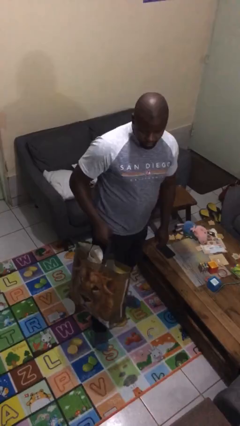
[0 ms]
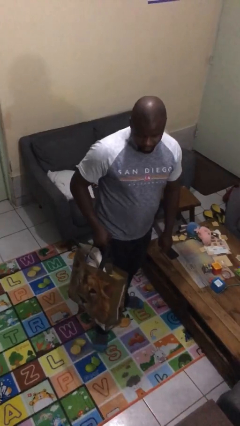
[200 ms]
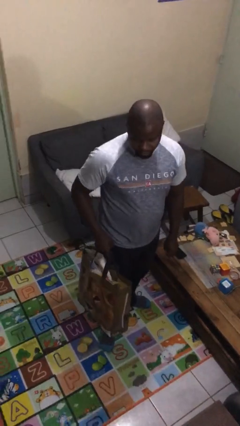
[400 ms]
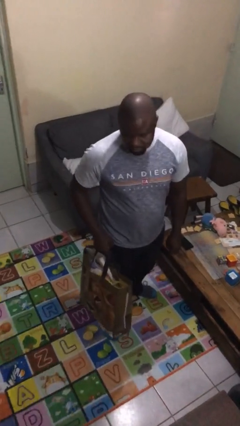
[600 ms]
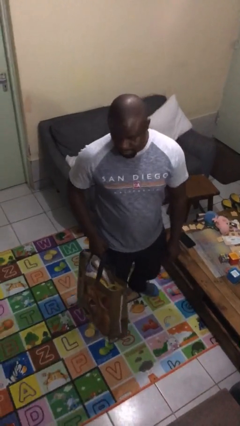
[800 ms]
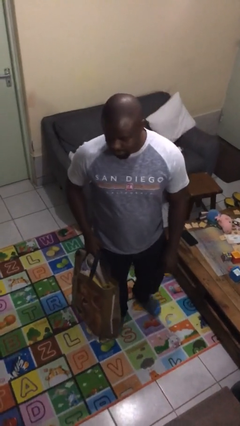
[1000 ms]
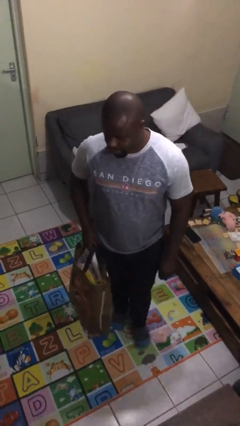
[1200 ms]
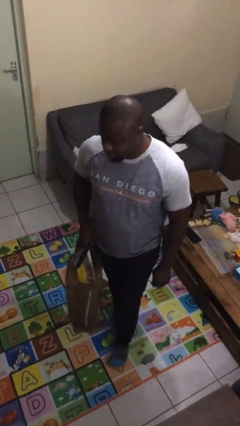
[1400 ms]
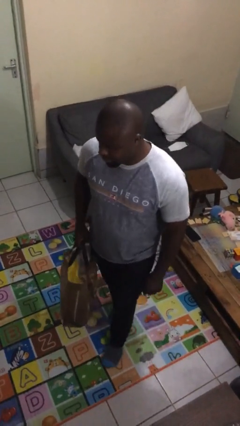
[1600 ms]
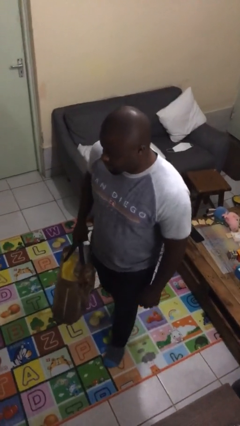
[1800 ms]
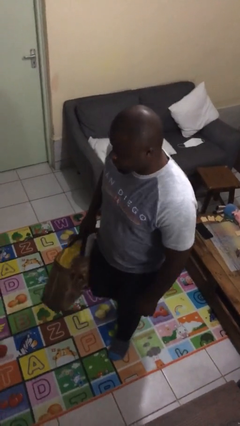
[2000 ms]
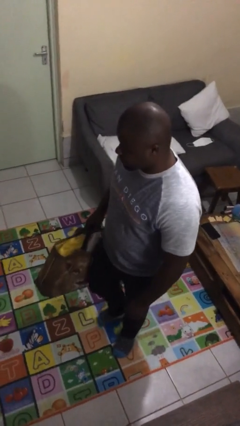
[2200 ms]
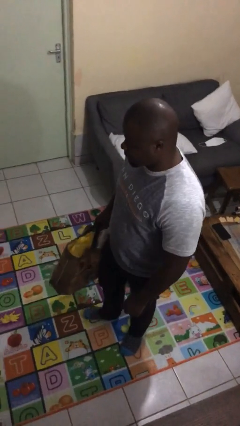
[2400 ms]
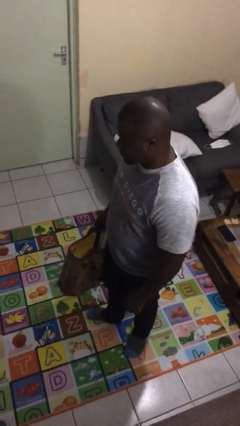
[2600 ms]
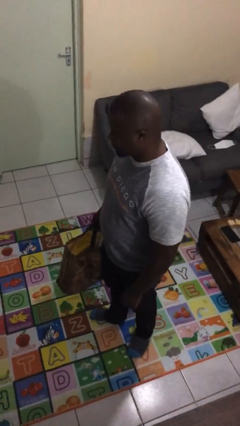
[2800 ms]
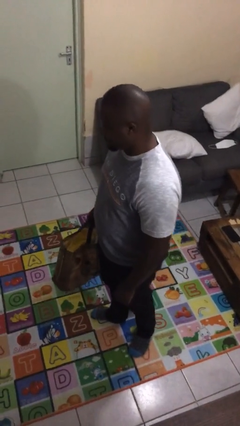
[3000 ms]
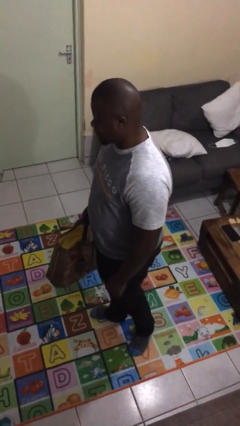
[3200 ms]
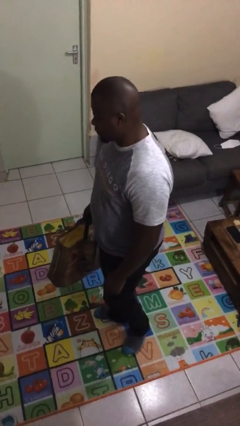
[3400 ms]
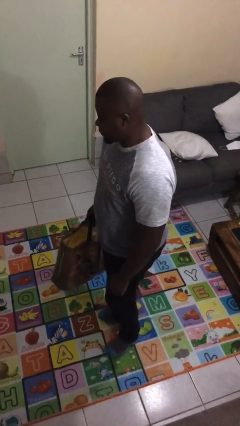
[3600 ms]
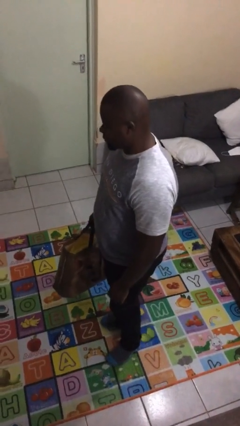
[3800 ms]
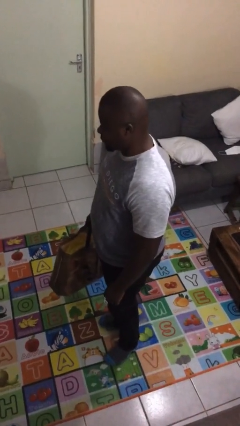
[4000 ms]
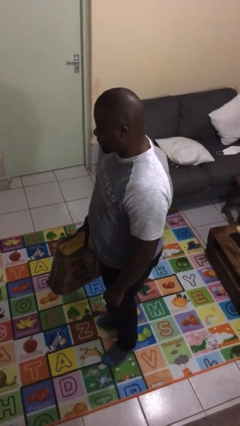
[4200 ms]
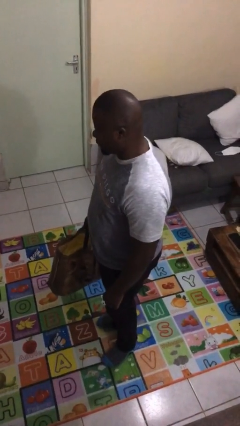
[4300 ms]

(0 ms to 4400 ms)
person carries groceries

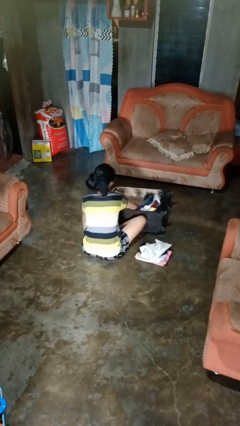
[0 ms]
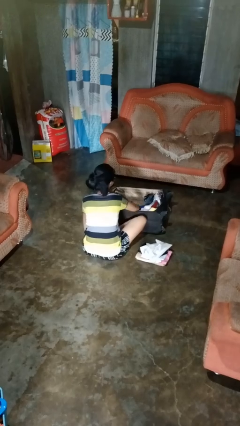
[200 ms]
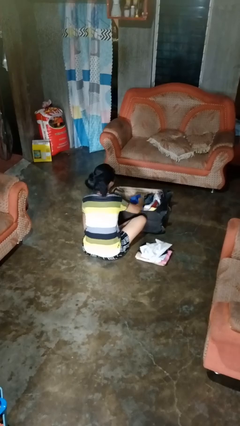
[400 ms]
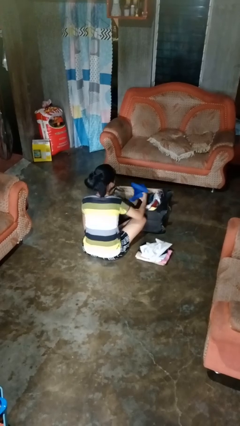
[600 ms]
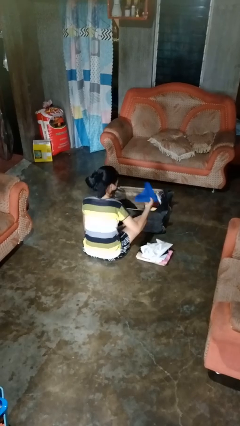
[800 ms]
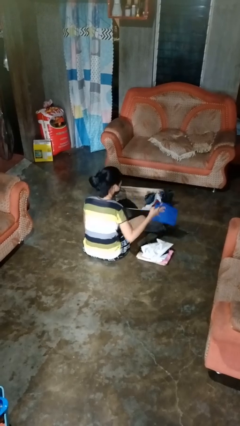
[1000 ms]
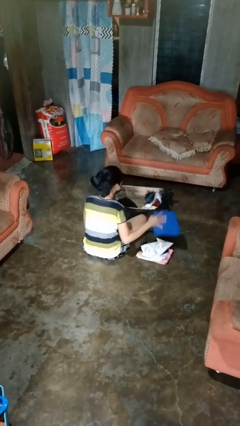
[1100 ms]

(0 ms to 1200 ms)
person unloads clothes from suitcase

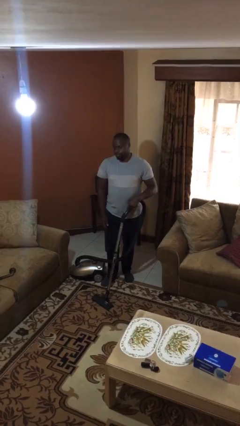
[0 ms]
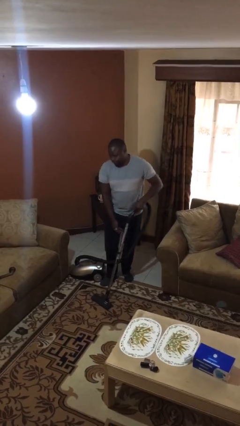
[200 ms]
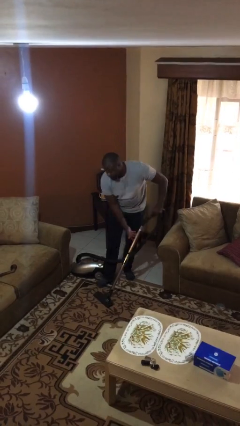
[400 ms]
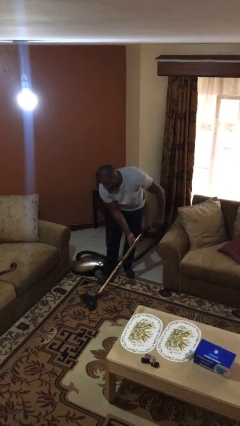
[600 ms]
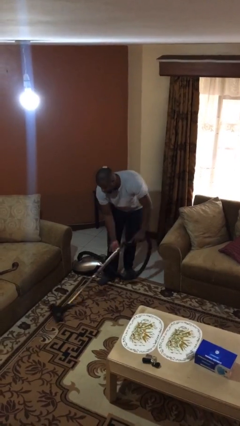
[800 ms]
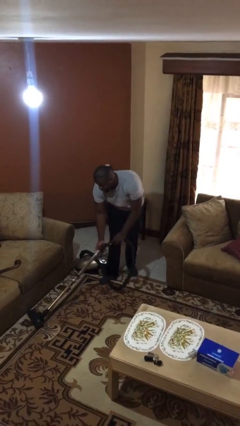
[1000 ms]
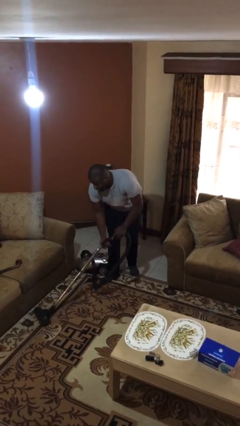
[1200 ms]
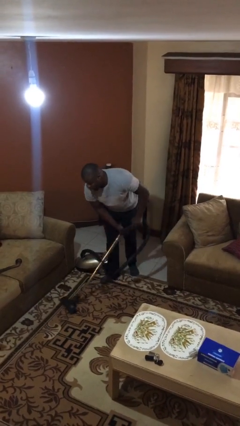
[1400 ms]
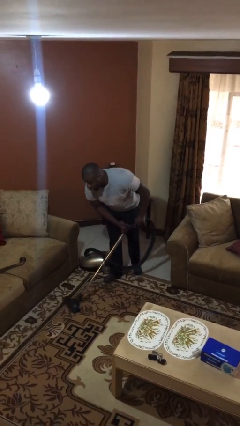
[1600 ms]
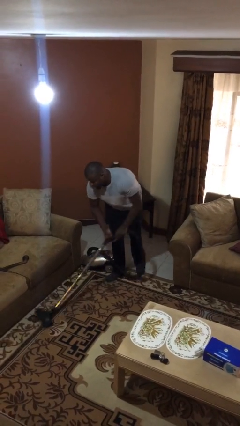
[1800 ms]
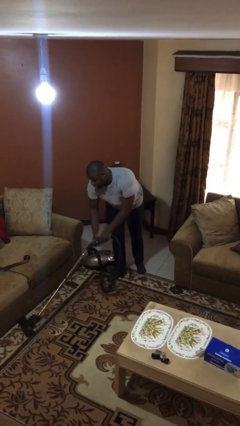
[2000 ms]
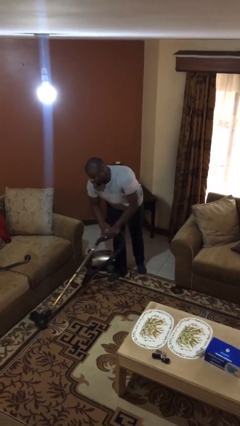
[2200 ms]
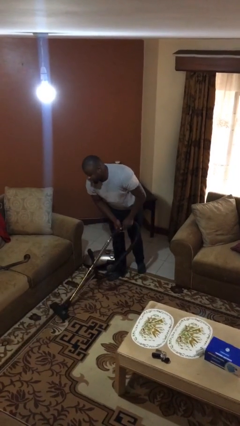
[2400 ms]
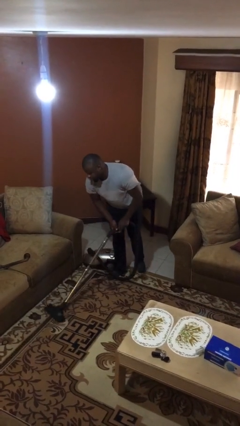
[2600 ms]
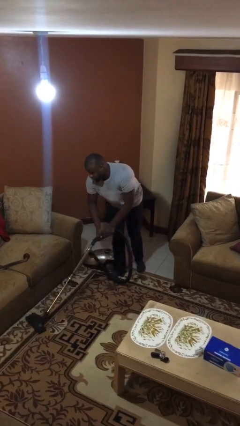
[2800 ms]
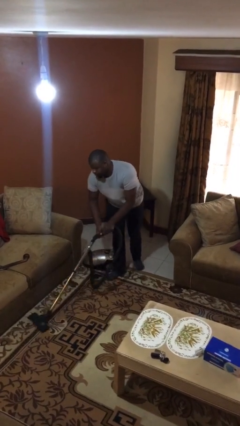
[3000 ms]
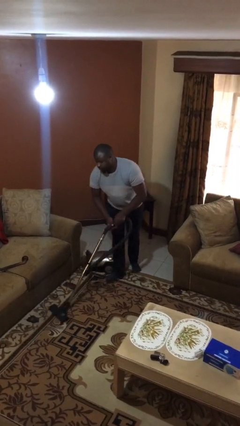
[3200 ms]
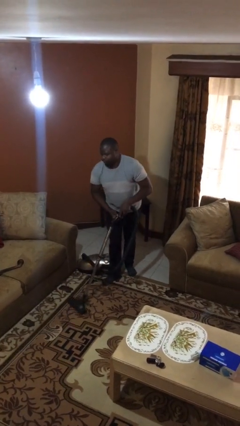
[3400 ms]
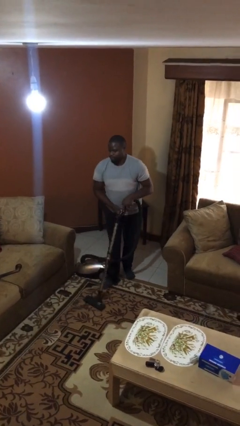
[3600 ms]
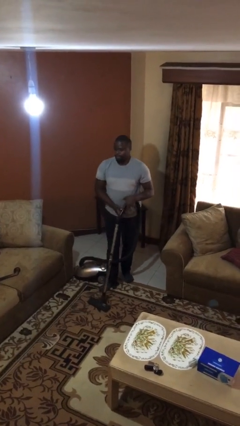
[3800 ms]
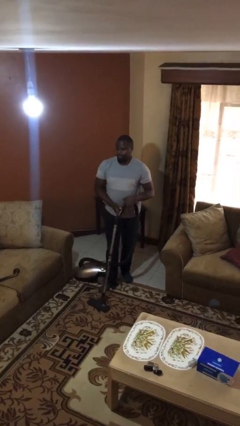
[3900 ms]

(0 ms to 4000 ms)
person vacuums carpet

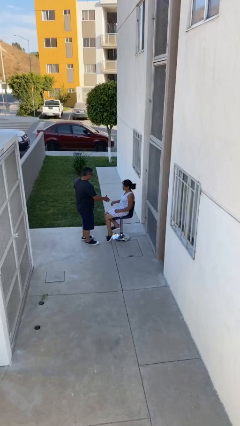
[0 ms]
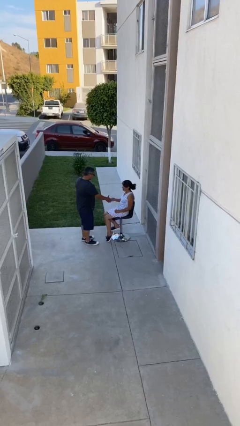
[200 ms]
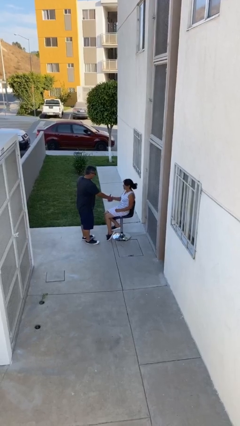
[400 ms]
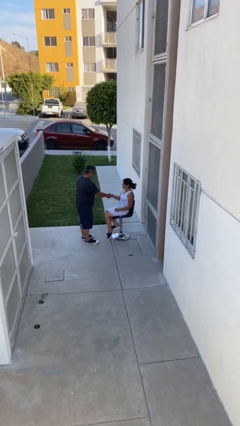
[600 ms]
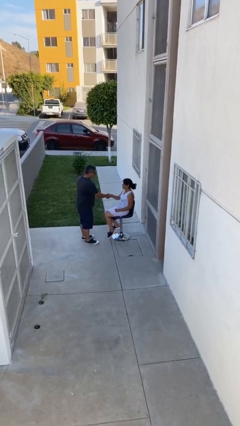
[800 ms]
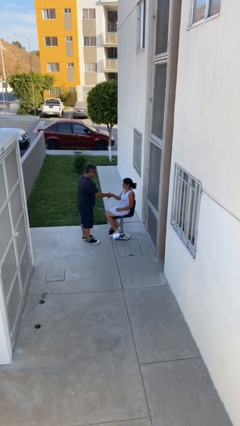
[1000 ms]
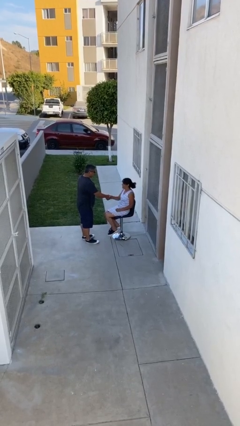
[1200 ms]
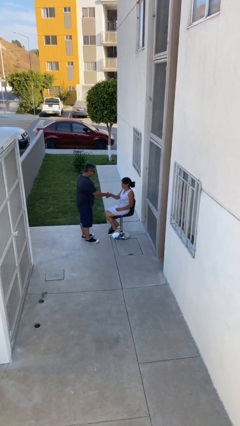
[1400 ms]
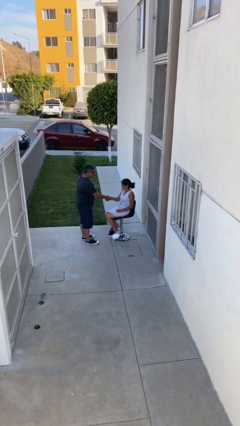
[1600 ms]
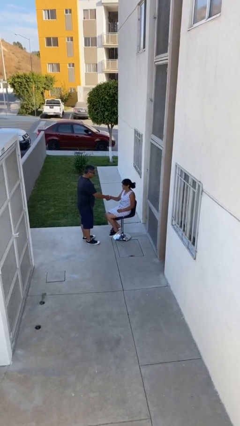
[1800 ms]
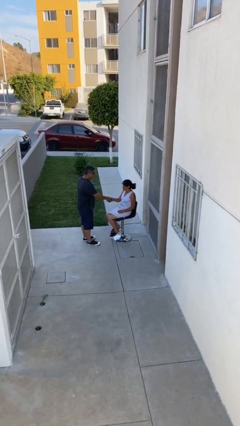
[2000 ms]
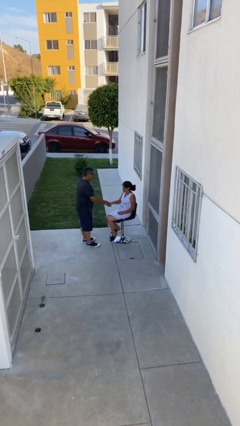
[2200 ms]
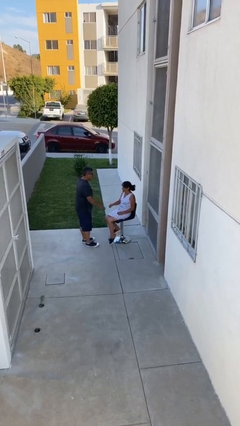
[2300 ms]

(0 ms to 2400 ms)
person shakes hand

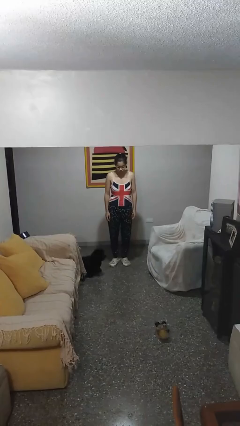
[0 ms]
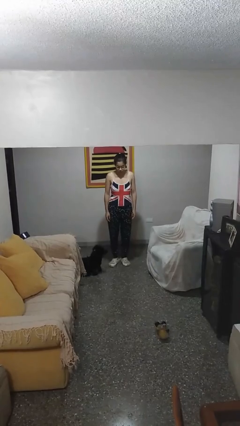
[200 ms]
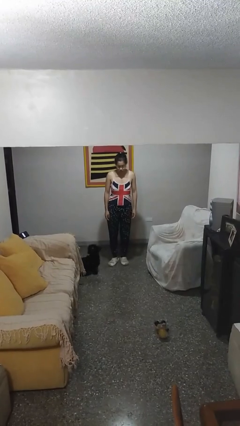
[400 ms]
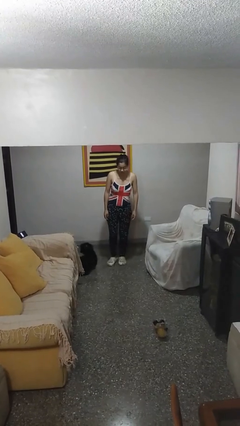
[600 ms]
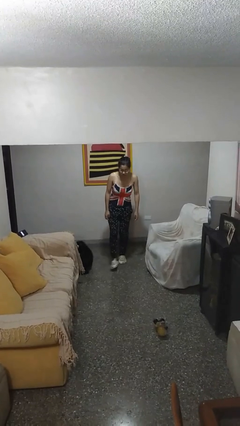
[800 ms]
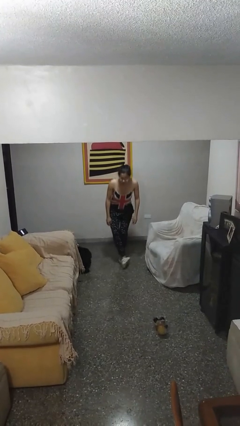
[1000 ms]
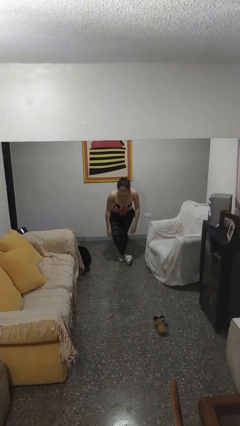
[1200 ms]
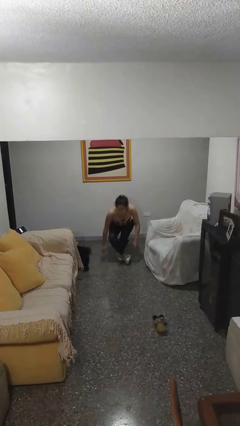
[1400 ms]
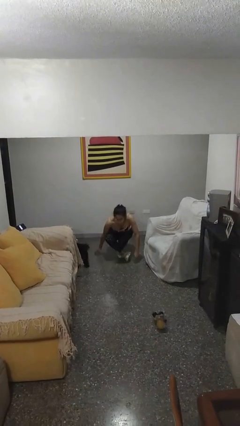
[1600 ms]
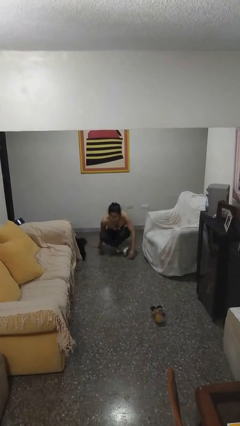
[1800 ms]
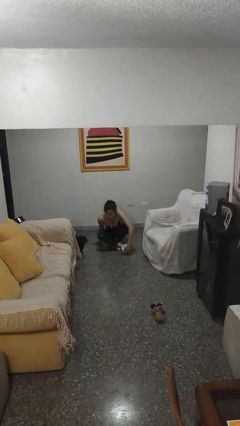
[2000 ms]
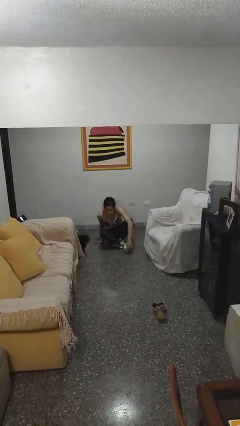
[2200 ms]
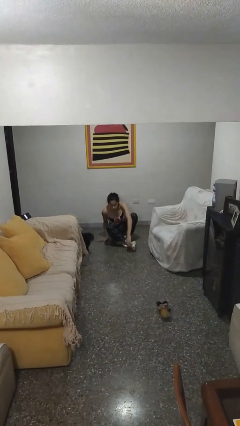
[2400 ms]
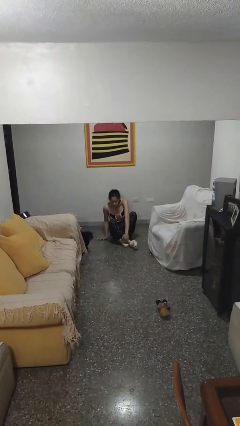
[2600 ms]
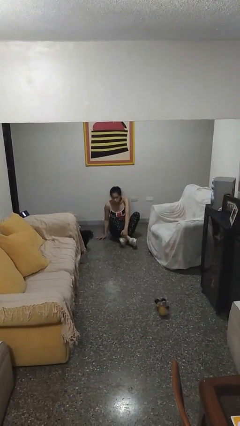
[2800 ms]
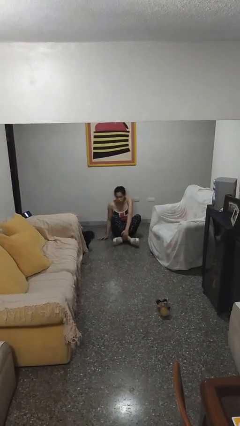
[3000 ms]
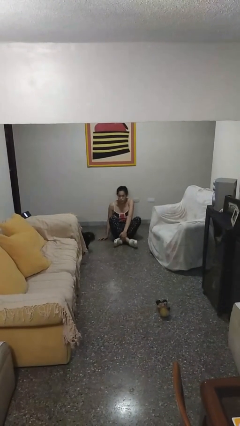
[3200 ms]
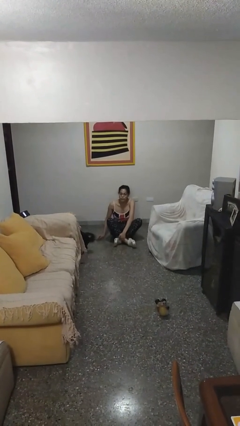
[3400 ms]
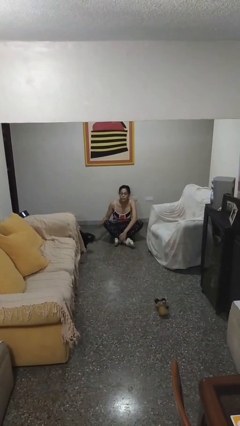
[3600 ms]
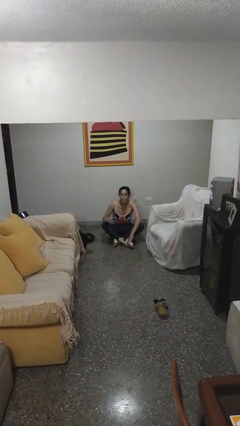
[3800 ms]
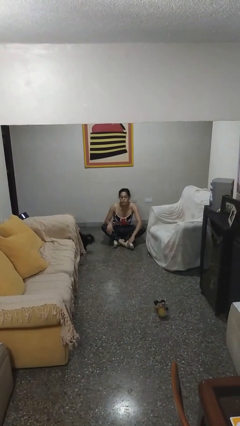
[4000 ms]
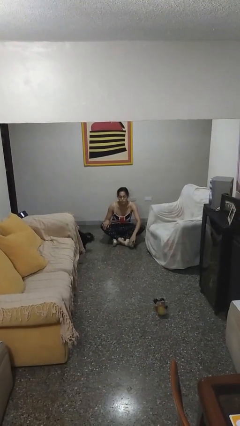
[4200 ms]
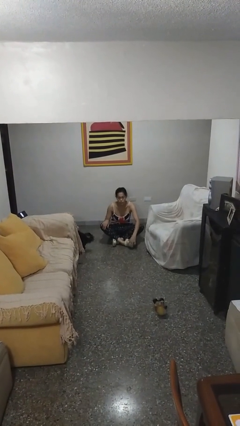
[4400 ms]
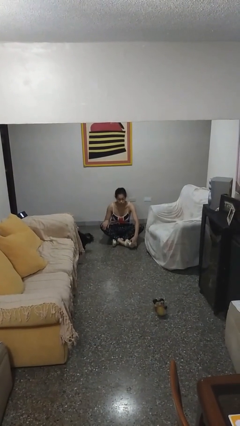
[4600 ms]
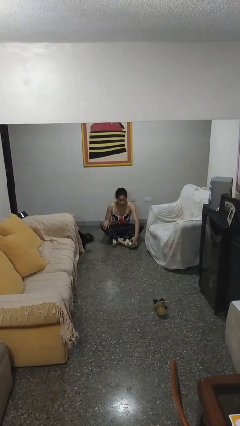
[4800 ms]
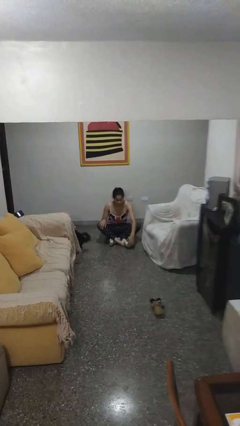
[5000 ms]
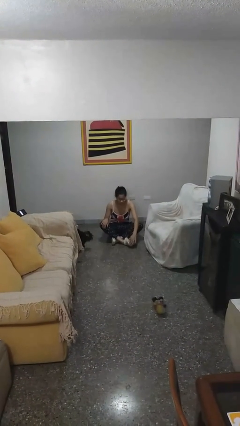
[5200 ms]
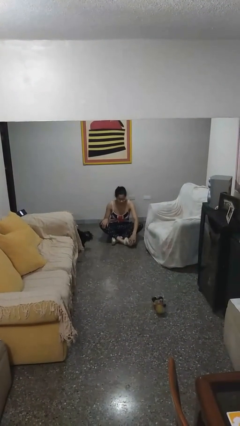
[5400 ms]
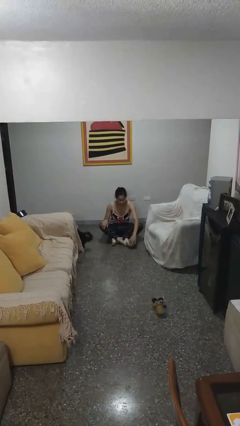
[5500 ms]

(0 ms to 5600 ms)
person sits crisscross

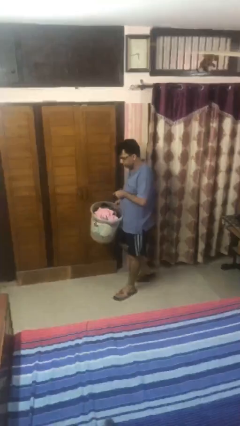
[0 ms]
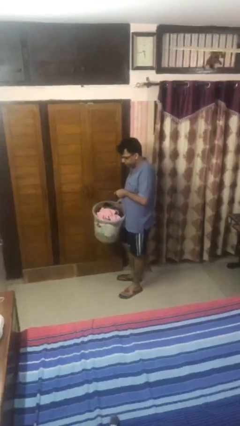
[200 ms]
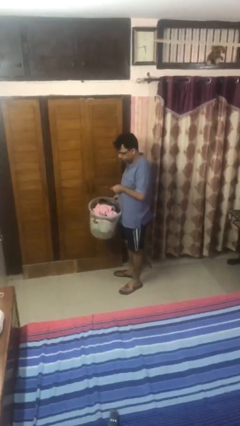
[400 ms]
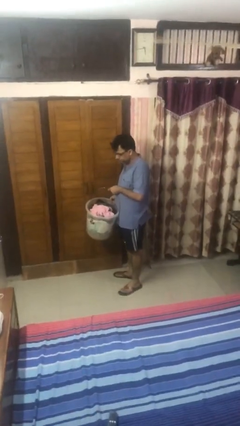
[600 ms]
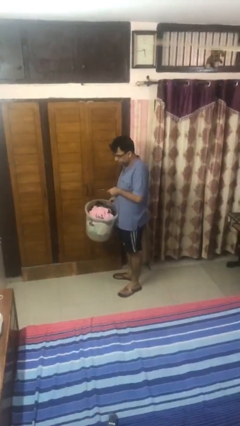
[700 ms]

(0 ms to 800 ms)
person carries laundry basket
